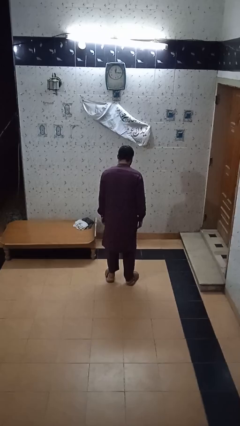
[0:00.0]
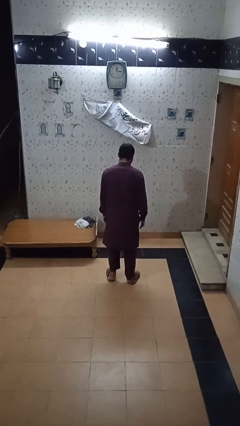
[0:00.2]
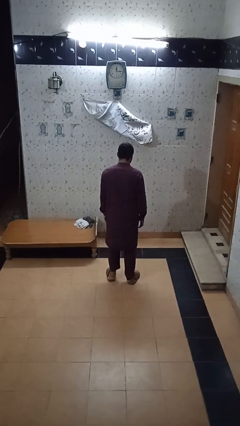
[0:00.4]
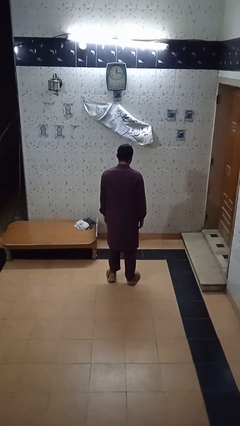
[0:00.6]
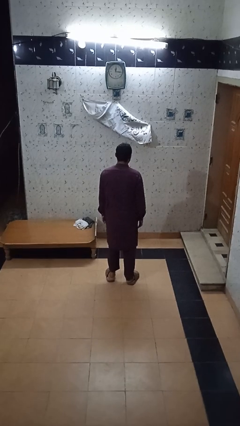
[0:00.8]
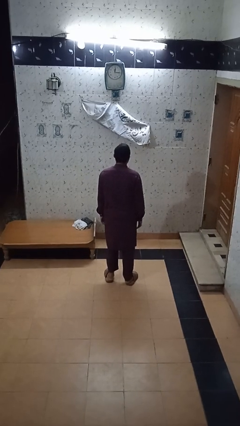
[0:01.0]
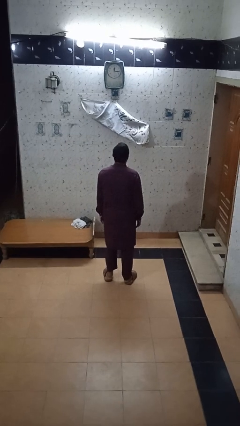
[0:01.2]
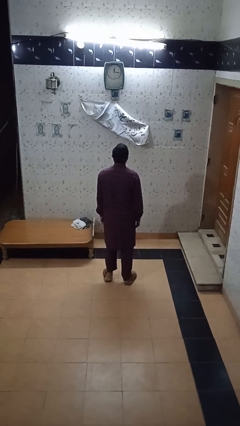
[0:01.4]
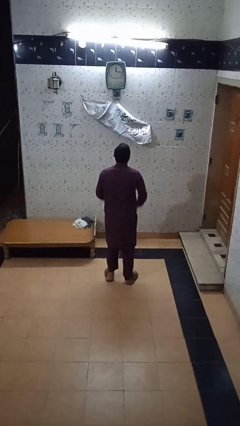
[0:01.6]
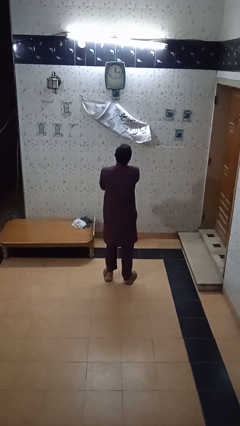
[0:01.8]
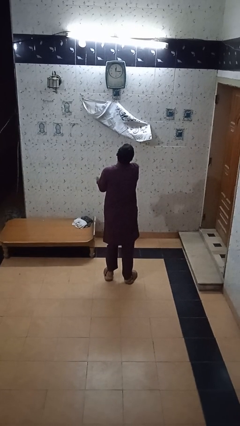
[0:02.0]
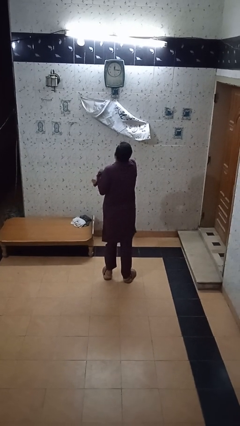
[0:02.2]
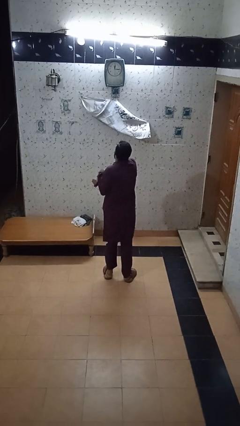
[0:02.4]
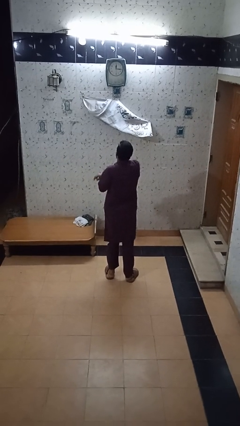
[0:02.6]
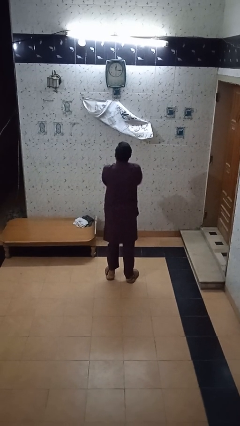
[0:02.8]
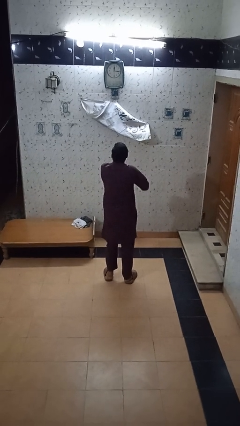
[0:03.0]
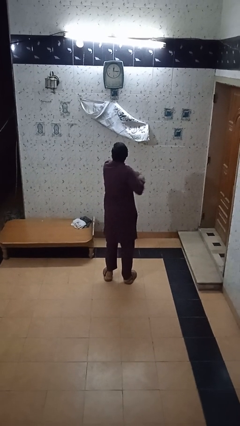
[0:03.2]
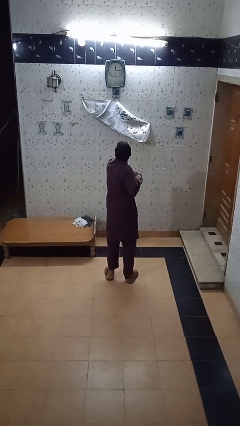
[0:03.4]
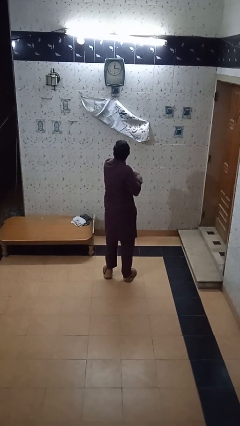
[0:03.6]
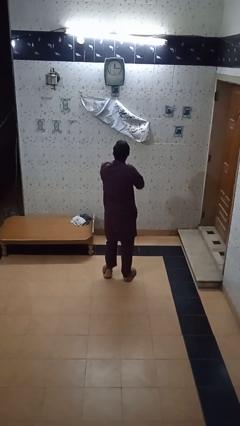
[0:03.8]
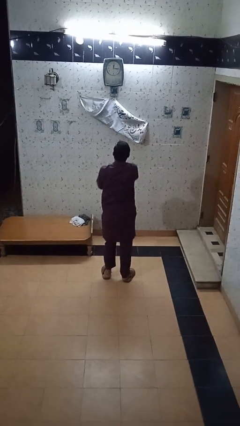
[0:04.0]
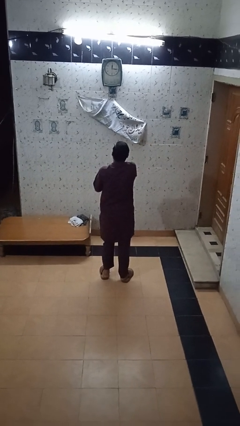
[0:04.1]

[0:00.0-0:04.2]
person stretches arms to side

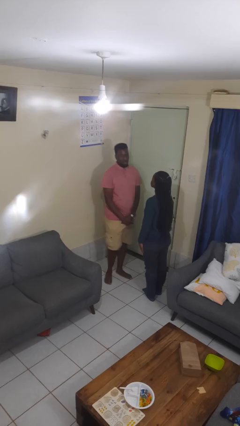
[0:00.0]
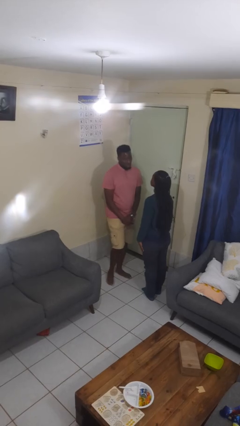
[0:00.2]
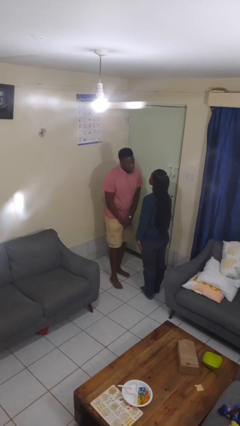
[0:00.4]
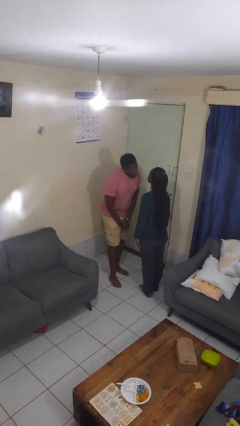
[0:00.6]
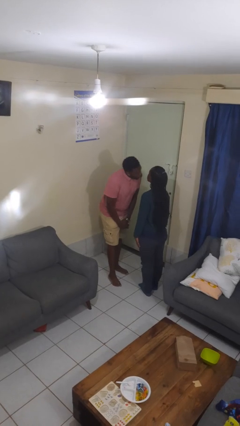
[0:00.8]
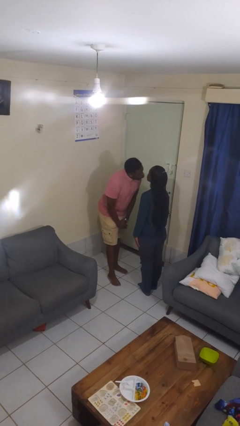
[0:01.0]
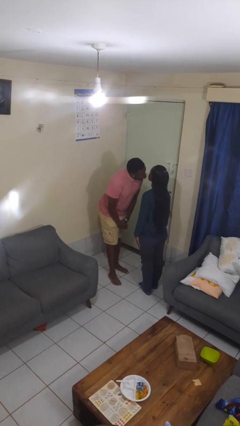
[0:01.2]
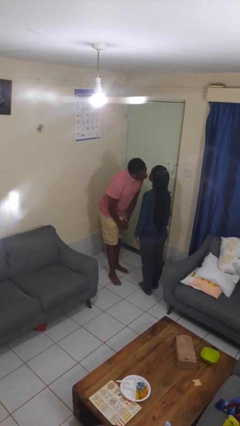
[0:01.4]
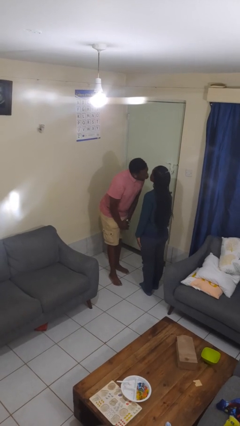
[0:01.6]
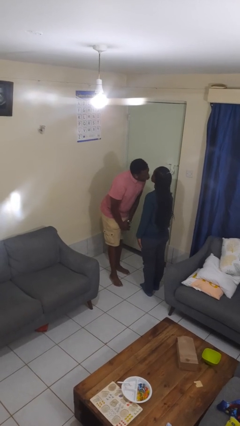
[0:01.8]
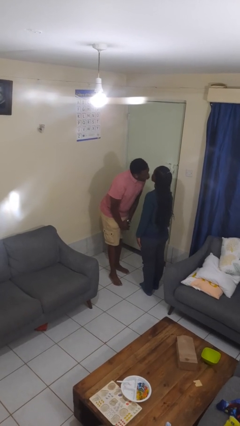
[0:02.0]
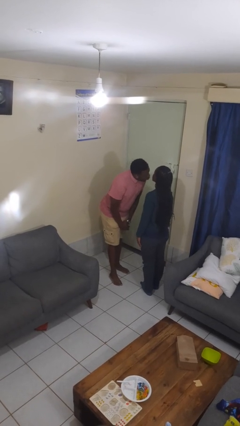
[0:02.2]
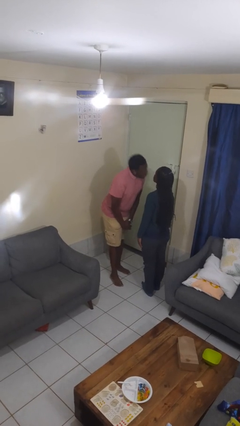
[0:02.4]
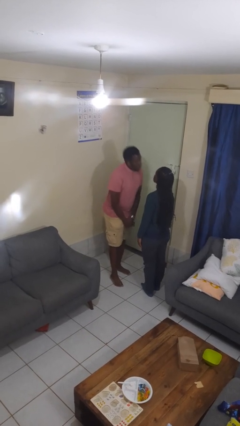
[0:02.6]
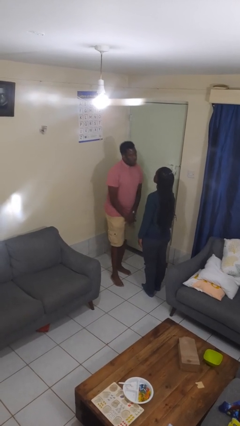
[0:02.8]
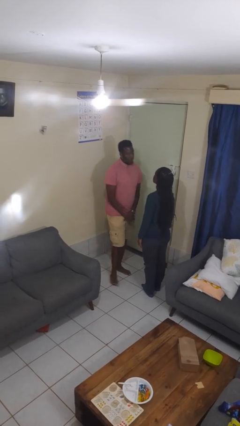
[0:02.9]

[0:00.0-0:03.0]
person kisses cheek of person

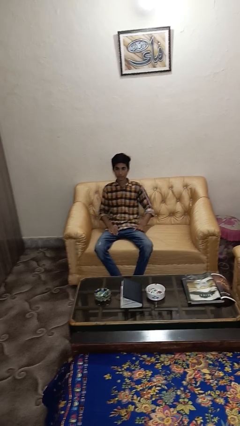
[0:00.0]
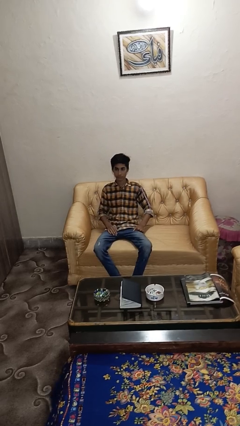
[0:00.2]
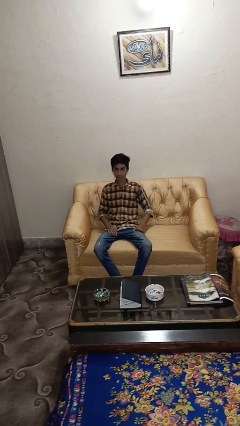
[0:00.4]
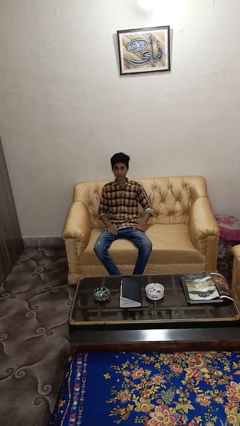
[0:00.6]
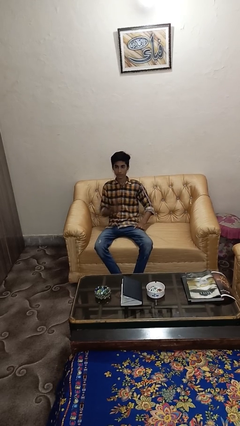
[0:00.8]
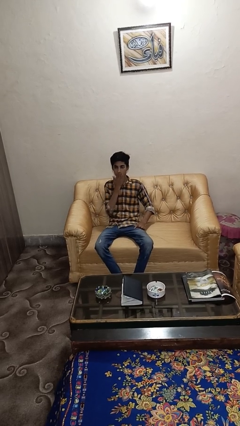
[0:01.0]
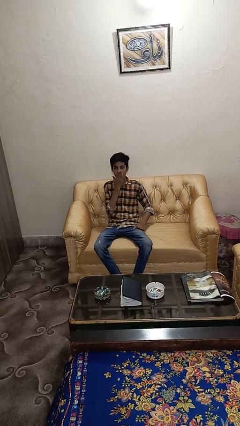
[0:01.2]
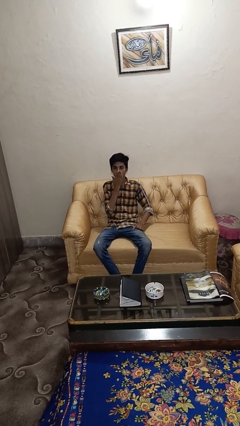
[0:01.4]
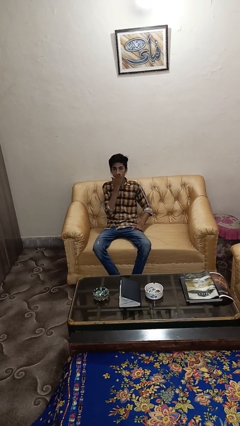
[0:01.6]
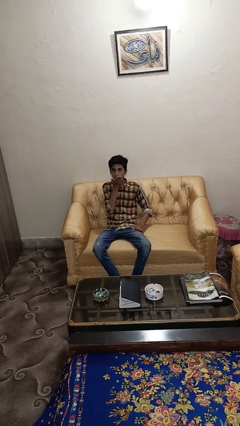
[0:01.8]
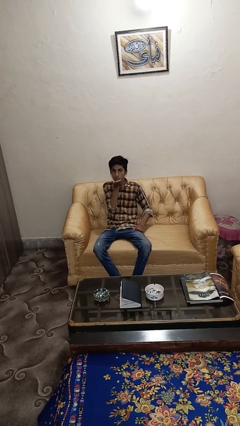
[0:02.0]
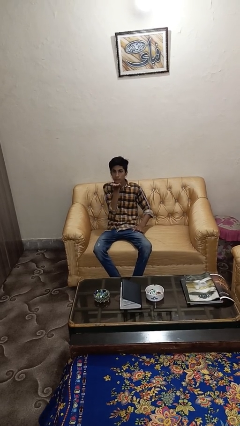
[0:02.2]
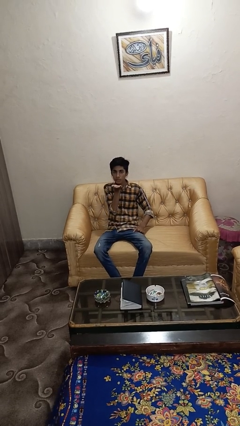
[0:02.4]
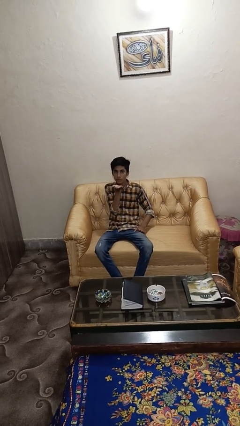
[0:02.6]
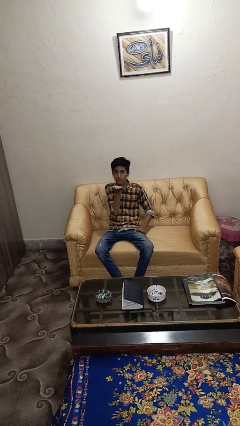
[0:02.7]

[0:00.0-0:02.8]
person gestures blow kiss

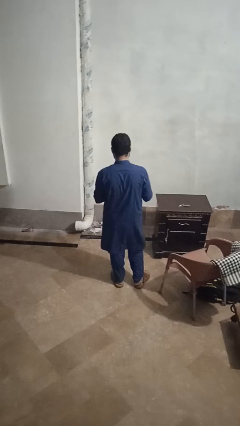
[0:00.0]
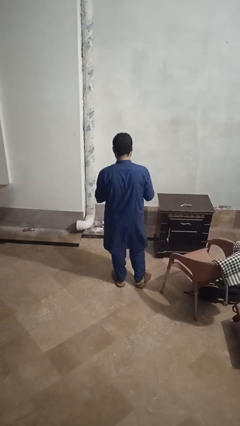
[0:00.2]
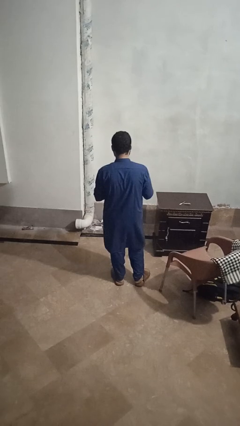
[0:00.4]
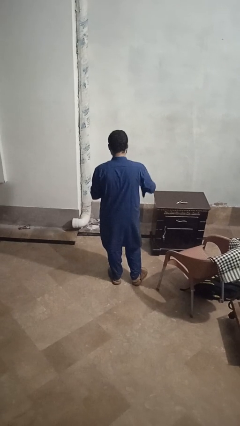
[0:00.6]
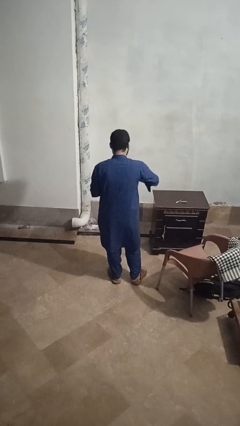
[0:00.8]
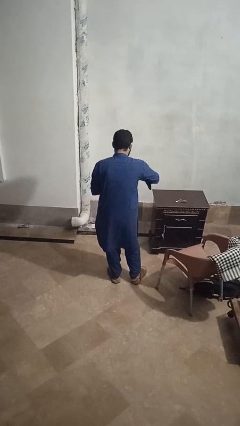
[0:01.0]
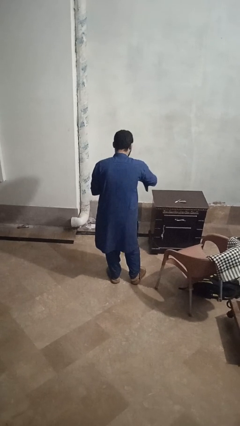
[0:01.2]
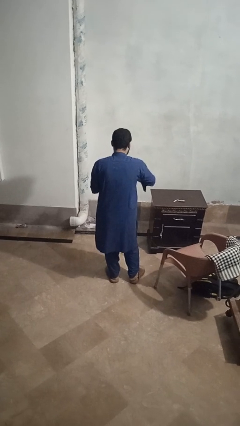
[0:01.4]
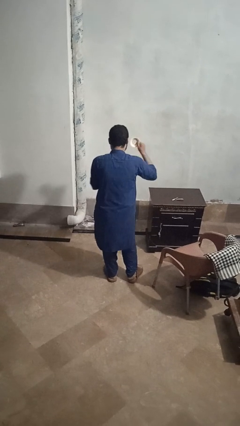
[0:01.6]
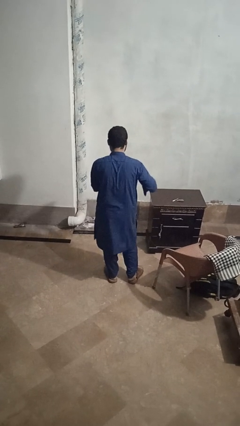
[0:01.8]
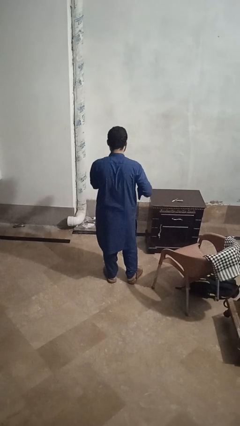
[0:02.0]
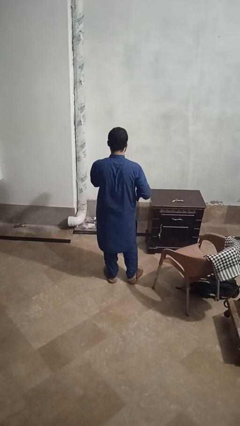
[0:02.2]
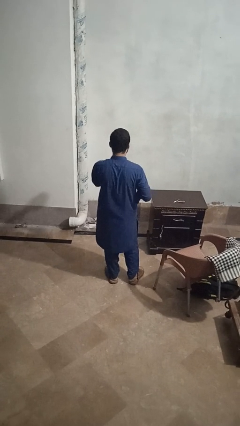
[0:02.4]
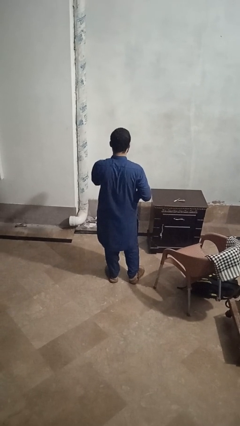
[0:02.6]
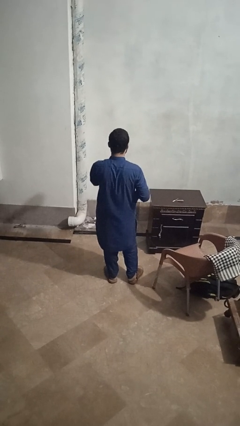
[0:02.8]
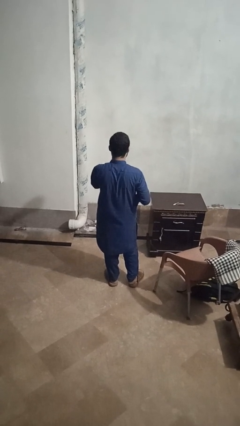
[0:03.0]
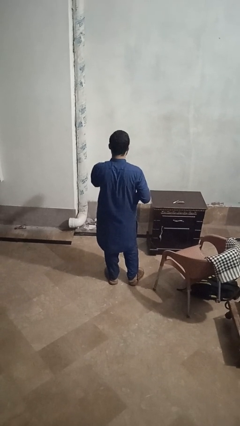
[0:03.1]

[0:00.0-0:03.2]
person opens beverage can

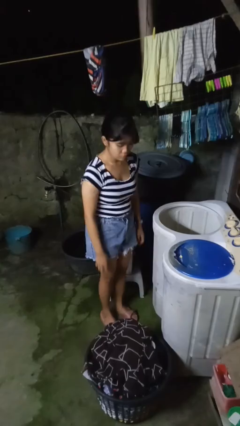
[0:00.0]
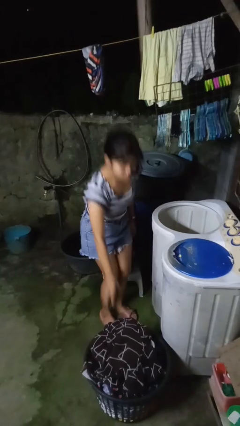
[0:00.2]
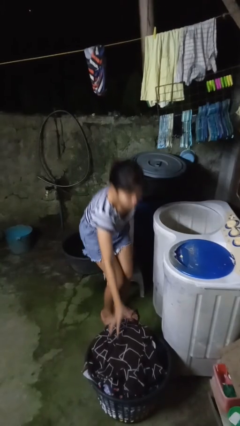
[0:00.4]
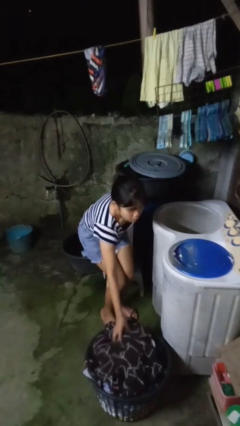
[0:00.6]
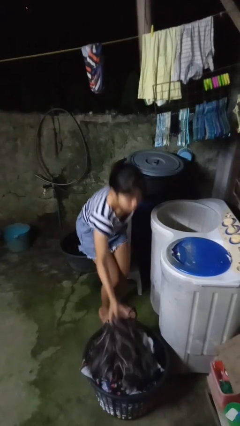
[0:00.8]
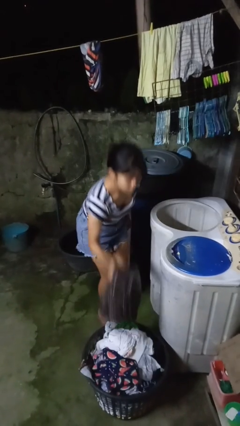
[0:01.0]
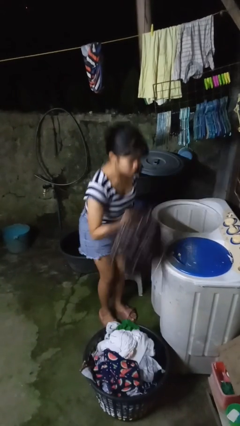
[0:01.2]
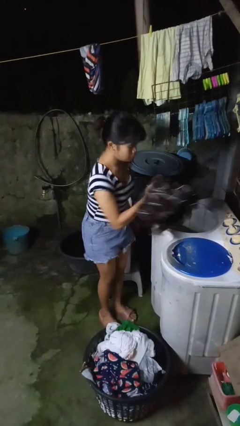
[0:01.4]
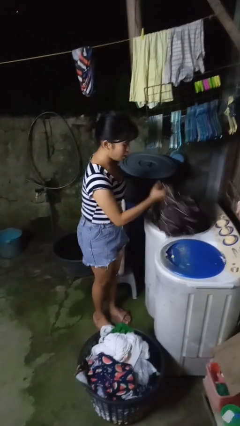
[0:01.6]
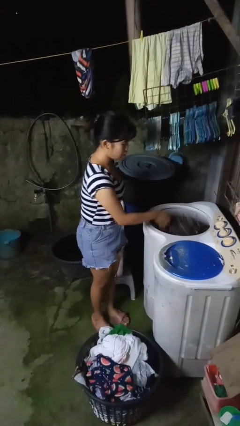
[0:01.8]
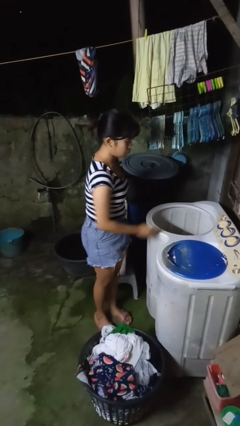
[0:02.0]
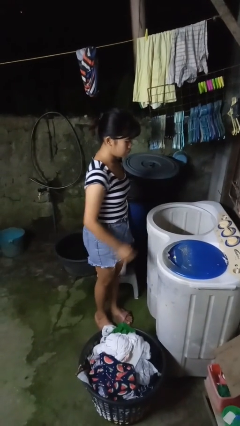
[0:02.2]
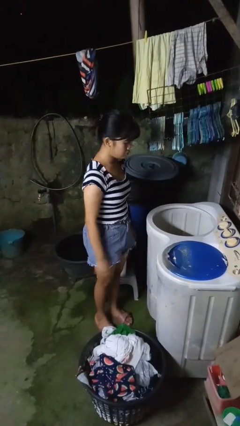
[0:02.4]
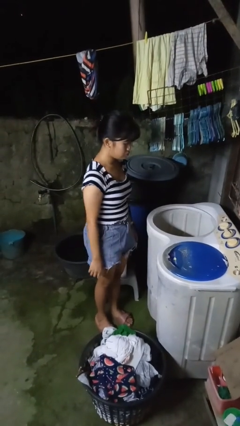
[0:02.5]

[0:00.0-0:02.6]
person loads clotheswasher

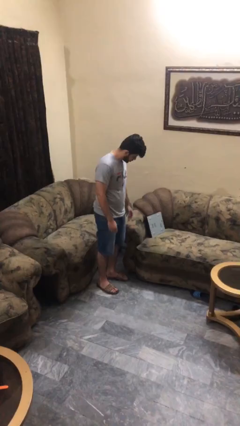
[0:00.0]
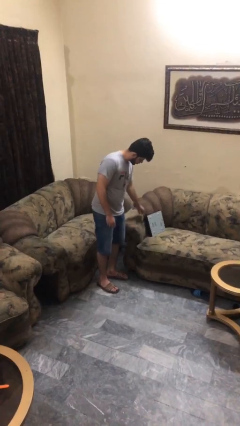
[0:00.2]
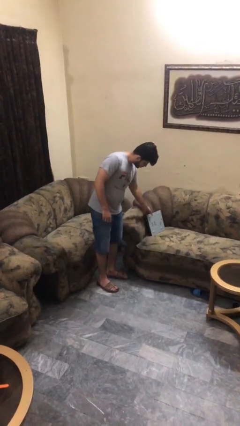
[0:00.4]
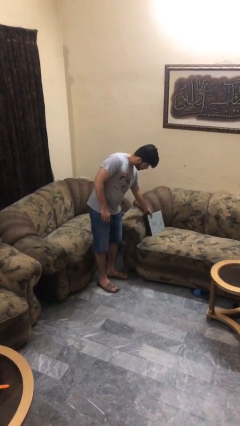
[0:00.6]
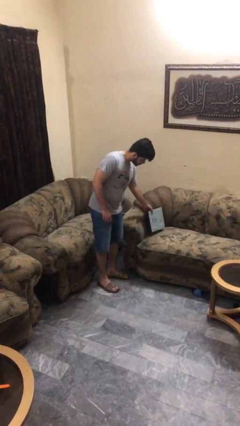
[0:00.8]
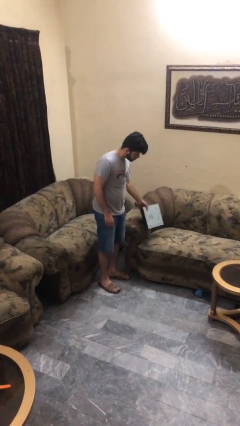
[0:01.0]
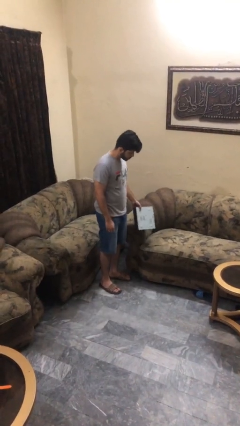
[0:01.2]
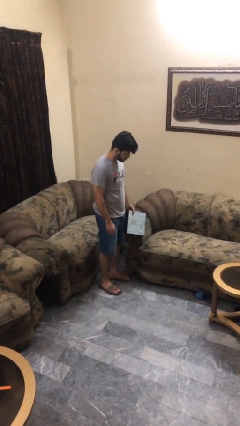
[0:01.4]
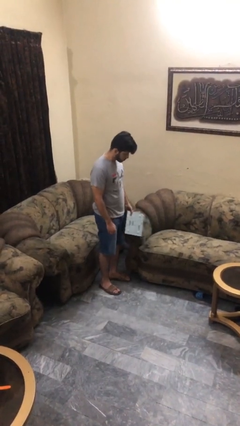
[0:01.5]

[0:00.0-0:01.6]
person picks up object from couch

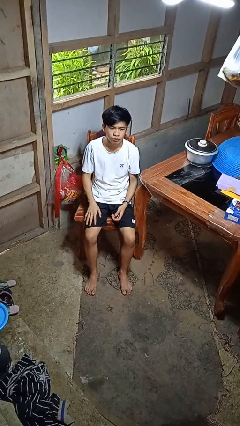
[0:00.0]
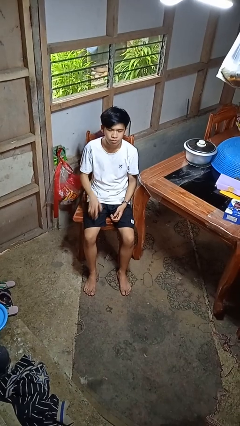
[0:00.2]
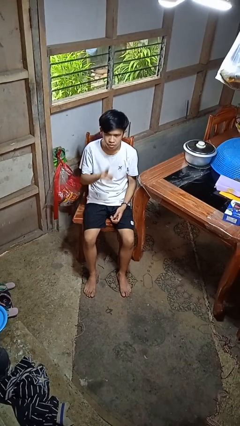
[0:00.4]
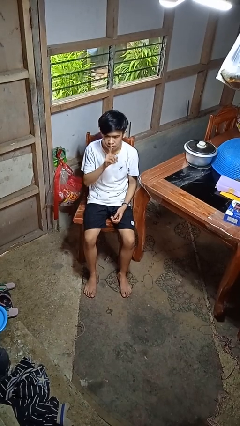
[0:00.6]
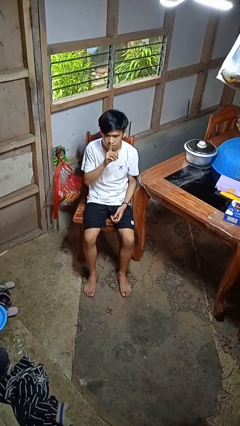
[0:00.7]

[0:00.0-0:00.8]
person gestures be quiet
